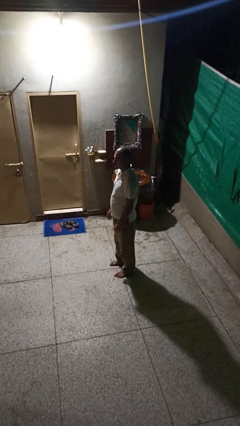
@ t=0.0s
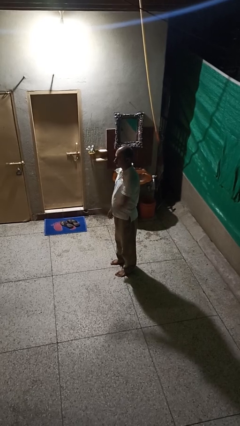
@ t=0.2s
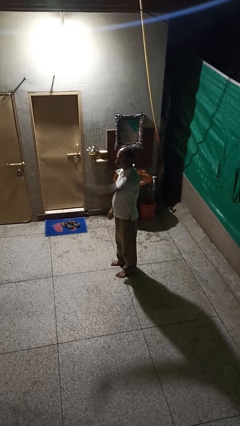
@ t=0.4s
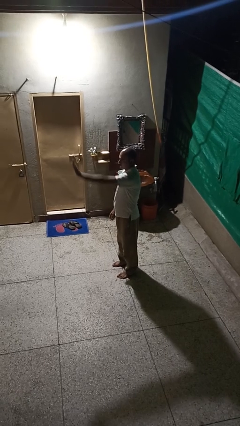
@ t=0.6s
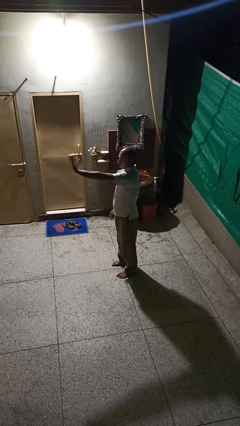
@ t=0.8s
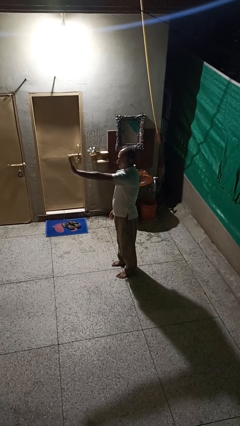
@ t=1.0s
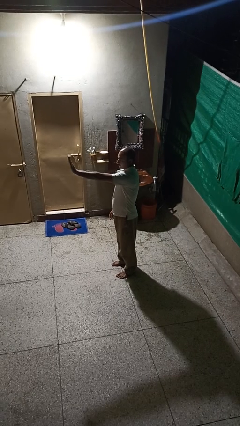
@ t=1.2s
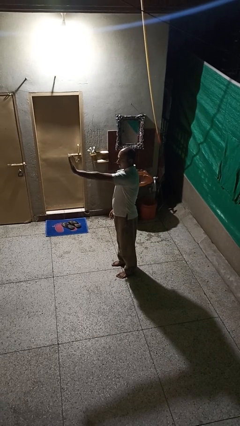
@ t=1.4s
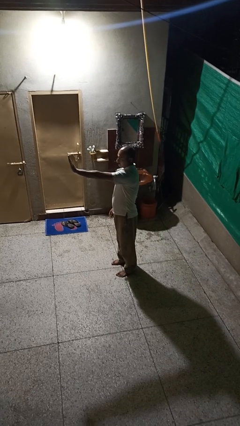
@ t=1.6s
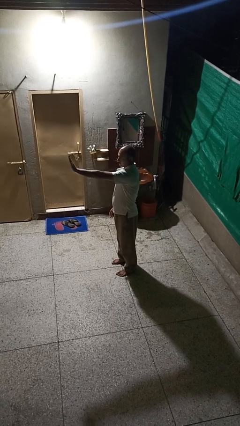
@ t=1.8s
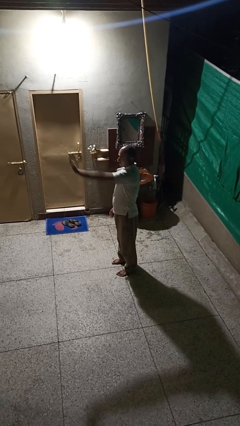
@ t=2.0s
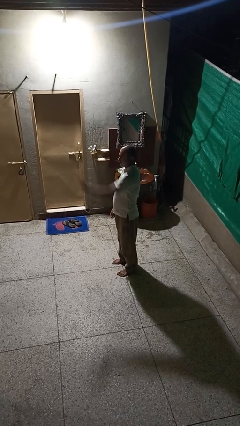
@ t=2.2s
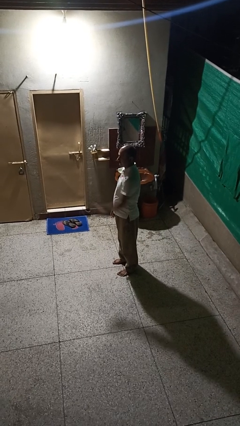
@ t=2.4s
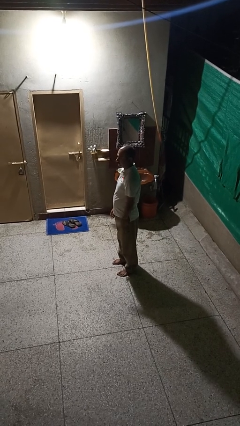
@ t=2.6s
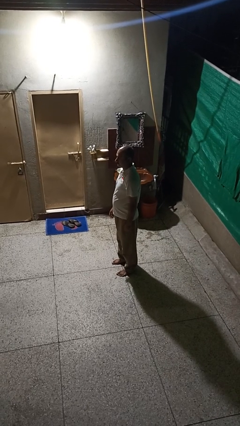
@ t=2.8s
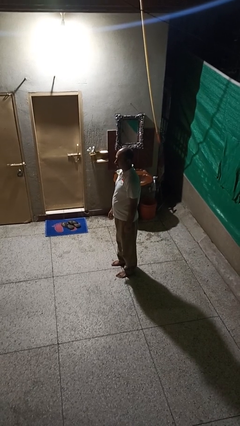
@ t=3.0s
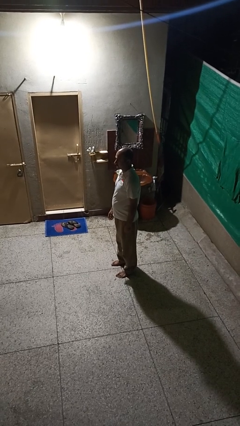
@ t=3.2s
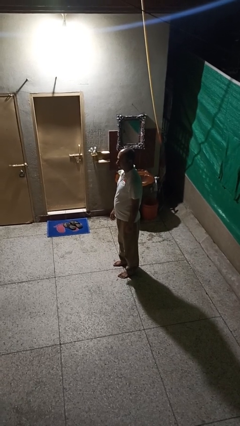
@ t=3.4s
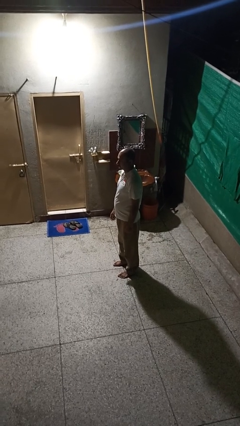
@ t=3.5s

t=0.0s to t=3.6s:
person gestures stop

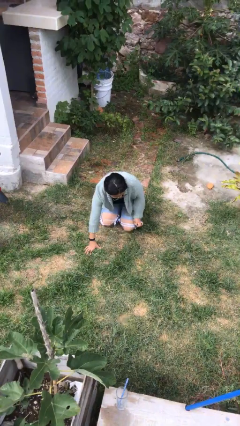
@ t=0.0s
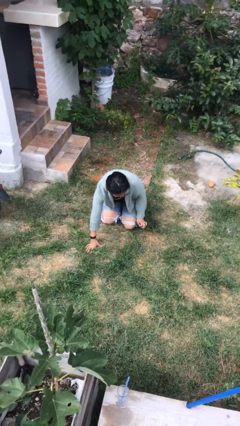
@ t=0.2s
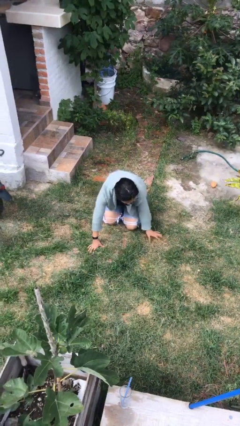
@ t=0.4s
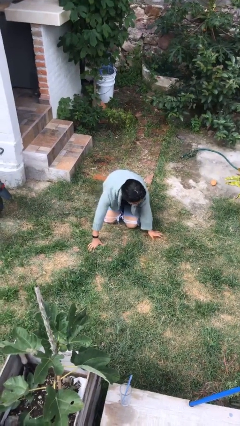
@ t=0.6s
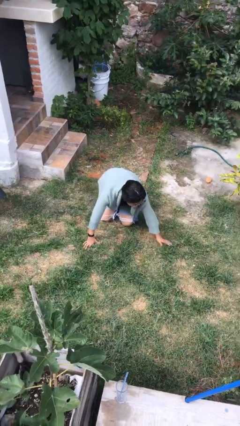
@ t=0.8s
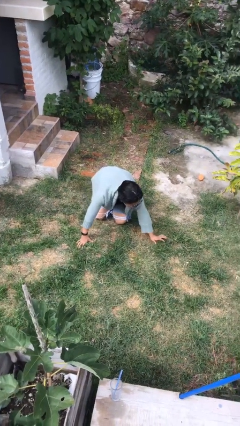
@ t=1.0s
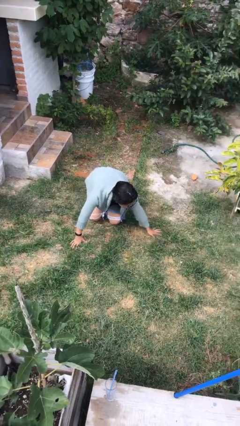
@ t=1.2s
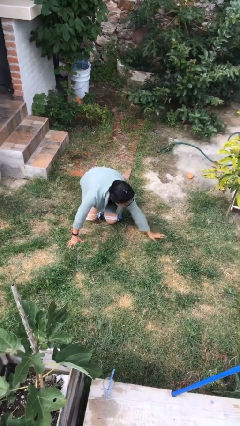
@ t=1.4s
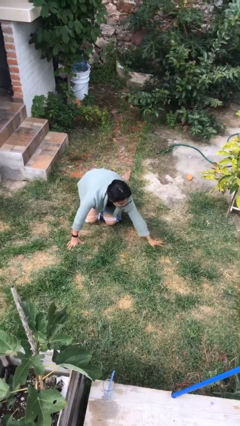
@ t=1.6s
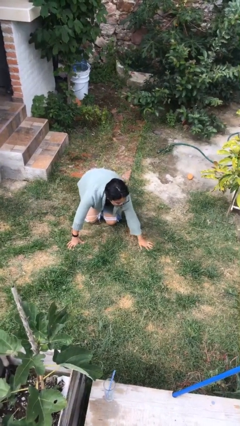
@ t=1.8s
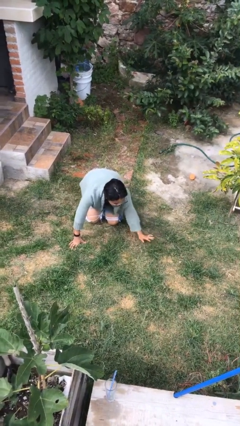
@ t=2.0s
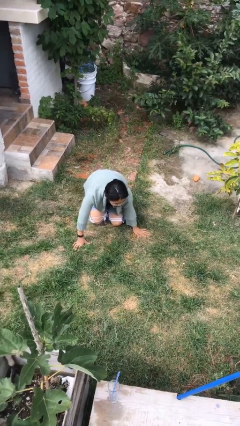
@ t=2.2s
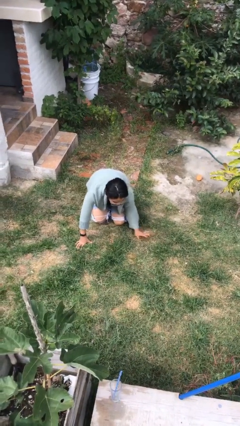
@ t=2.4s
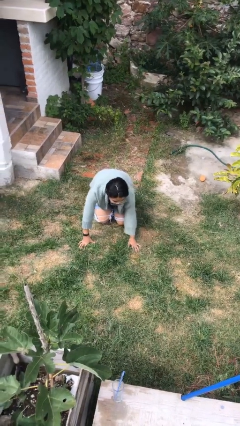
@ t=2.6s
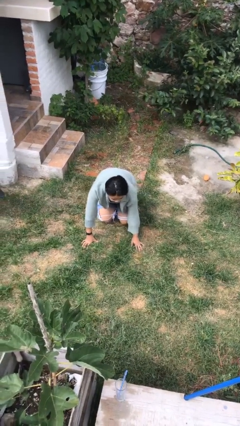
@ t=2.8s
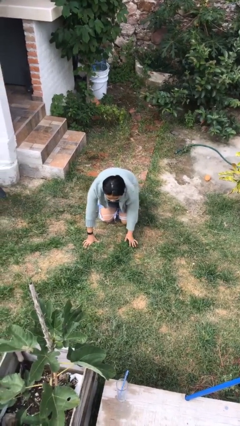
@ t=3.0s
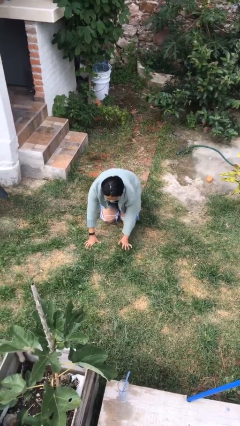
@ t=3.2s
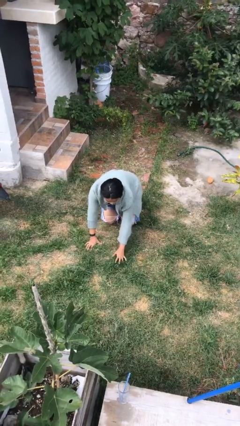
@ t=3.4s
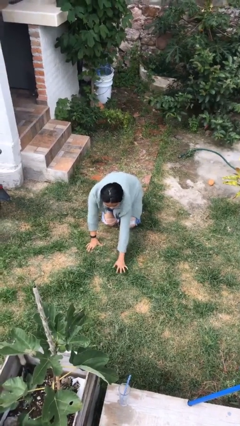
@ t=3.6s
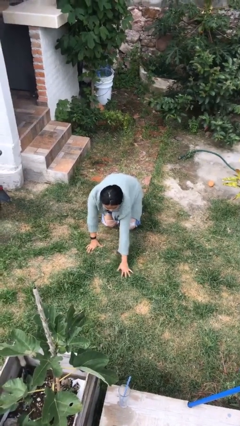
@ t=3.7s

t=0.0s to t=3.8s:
person crawls

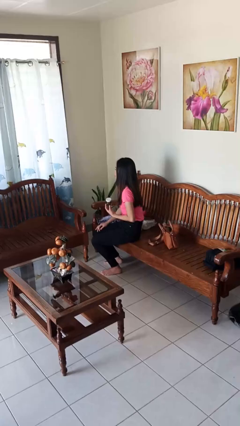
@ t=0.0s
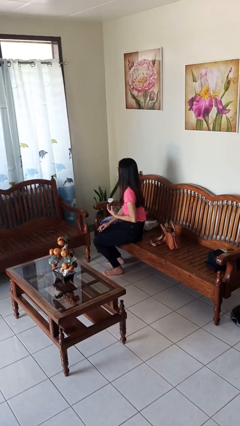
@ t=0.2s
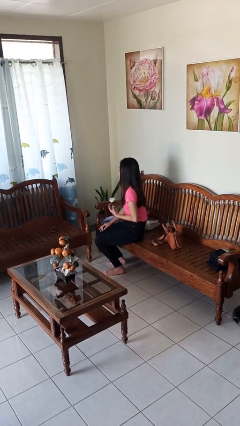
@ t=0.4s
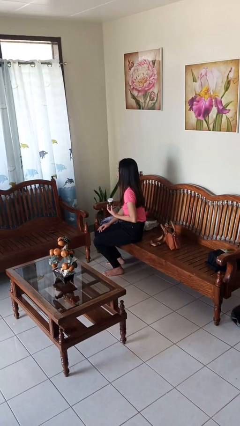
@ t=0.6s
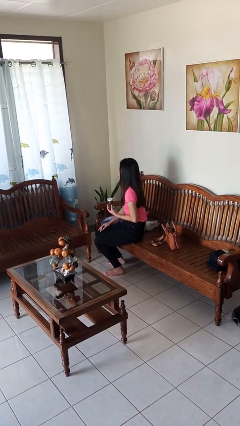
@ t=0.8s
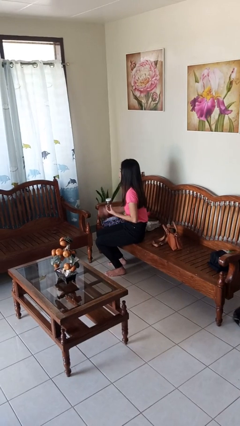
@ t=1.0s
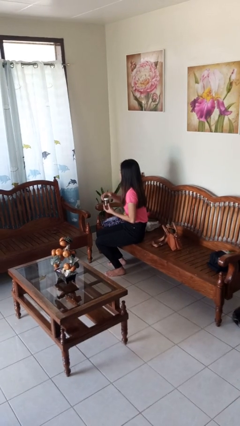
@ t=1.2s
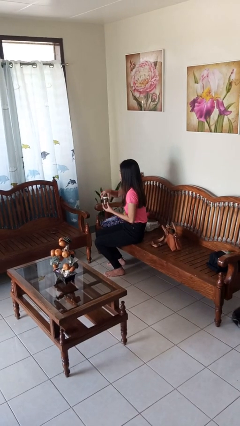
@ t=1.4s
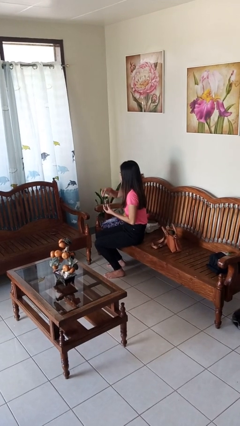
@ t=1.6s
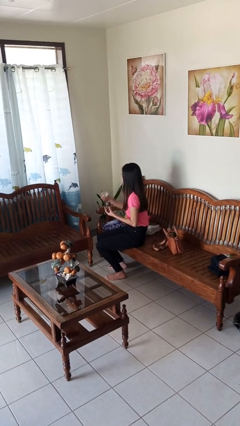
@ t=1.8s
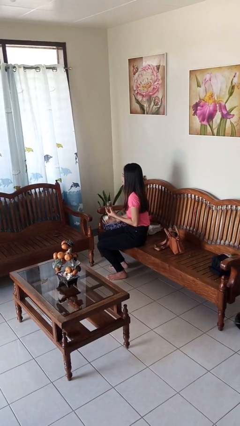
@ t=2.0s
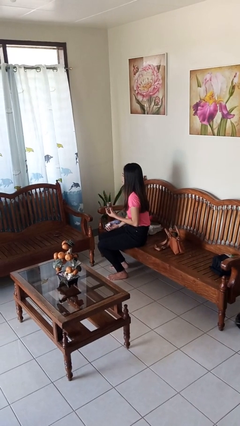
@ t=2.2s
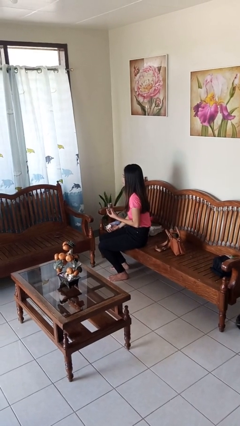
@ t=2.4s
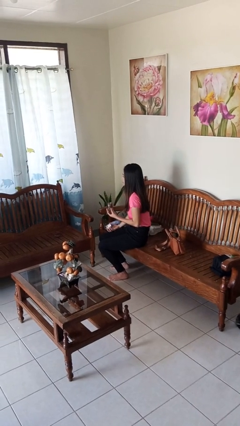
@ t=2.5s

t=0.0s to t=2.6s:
person opens jar

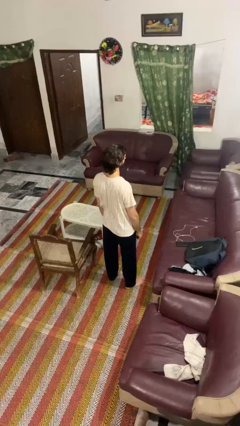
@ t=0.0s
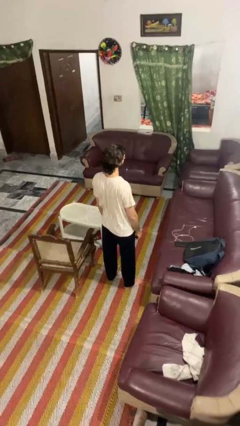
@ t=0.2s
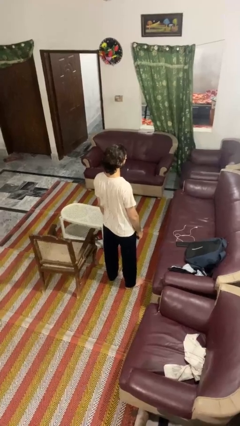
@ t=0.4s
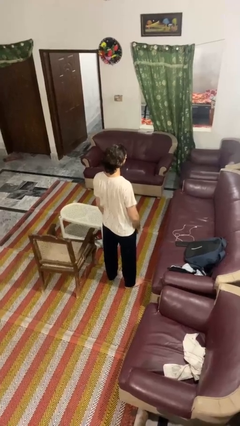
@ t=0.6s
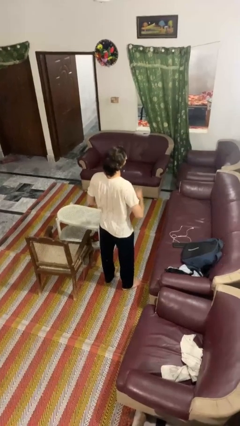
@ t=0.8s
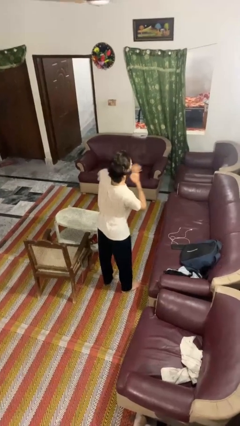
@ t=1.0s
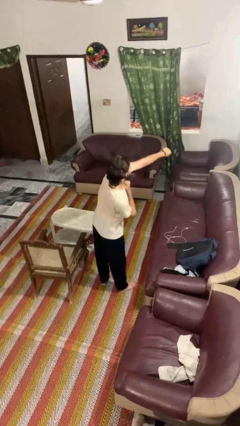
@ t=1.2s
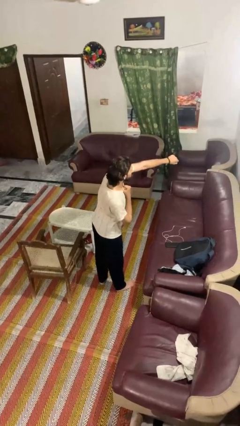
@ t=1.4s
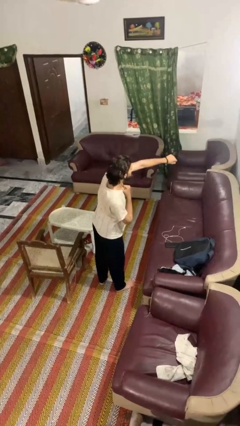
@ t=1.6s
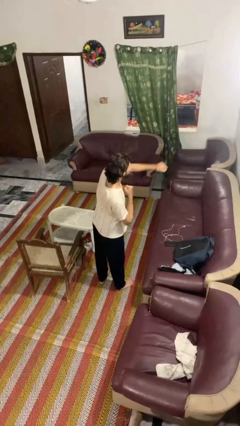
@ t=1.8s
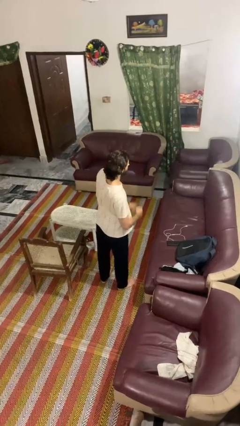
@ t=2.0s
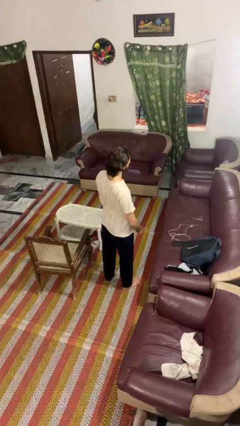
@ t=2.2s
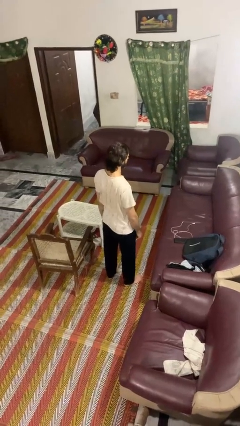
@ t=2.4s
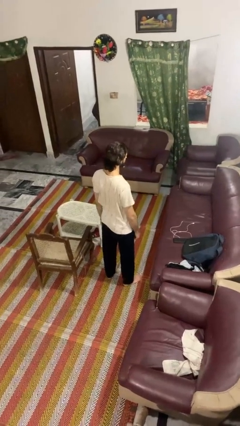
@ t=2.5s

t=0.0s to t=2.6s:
person punches

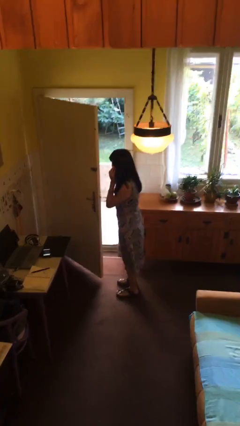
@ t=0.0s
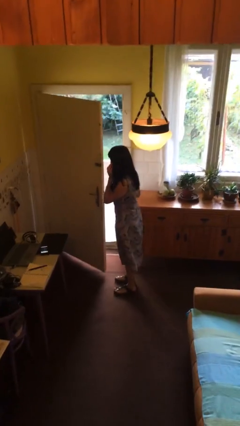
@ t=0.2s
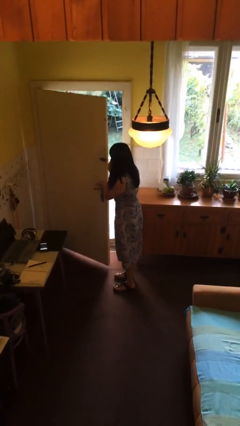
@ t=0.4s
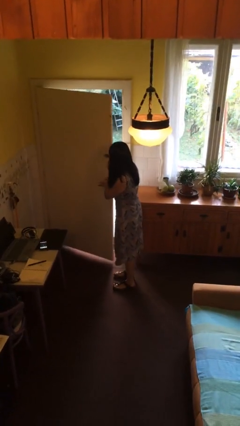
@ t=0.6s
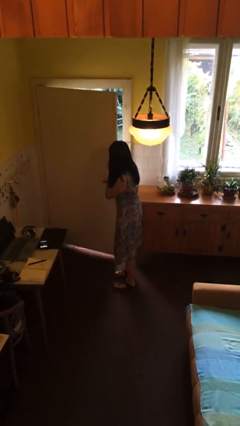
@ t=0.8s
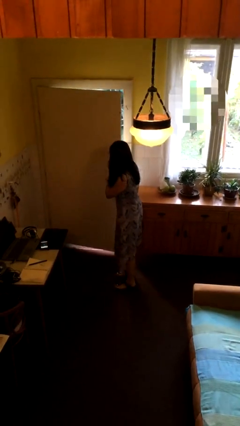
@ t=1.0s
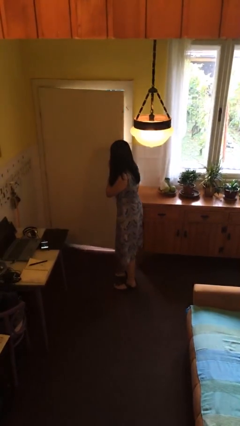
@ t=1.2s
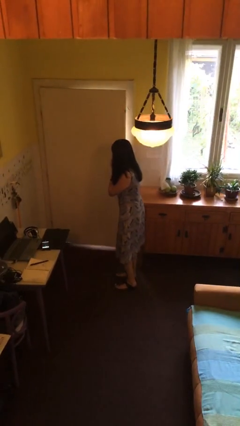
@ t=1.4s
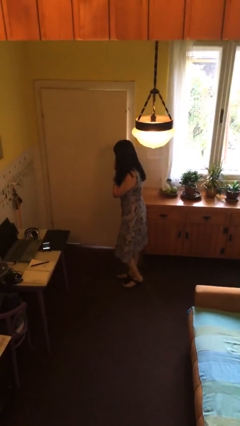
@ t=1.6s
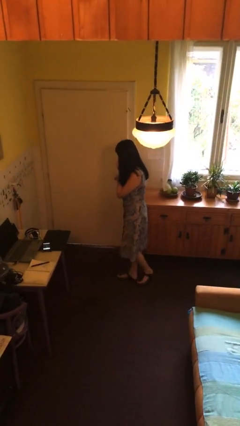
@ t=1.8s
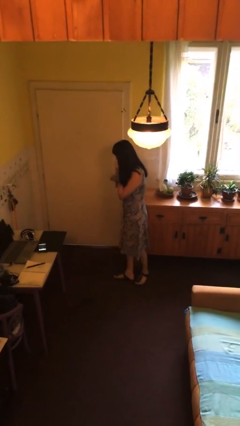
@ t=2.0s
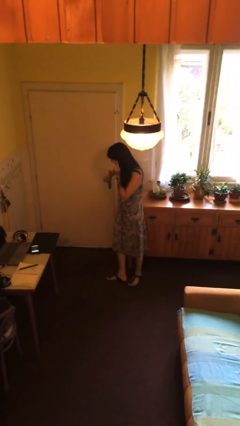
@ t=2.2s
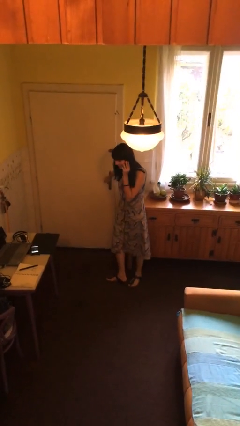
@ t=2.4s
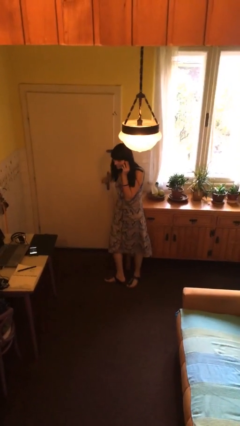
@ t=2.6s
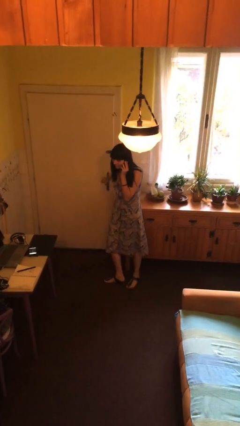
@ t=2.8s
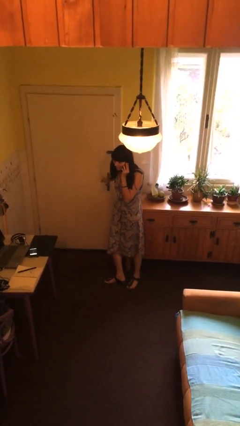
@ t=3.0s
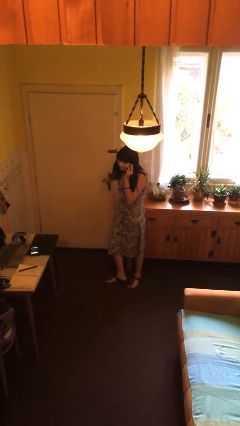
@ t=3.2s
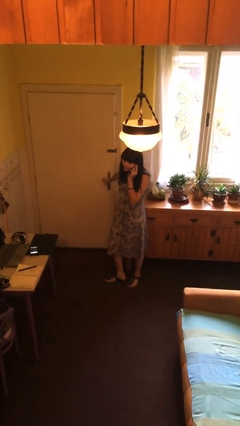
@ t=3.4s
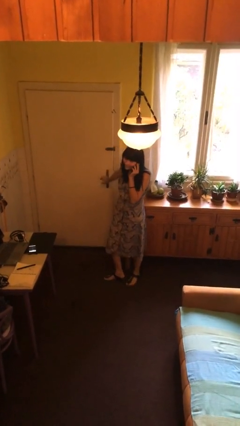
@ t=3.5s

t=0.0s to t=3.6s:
person closes facility door

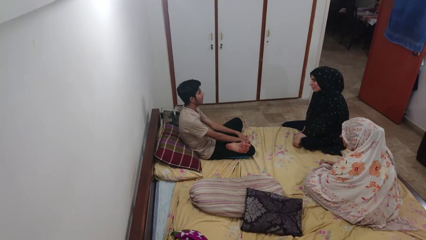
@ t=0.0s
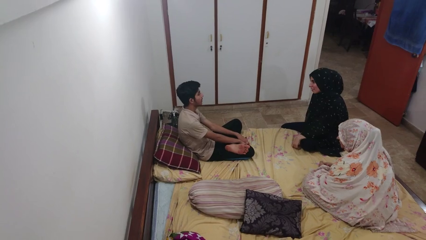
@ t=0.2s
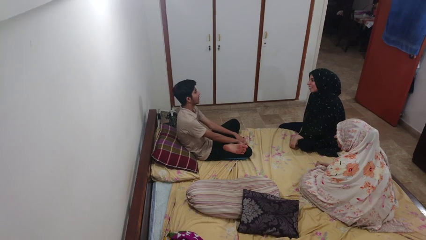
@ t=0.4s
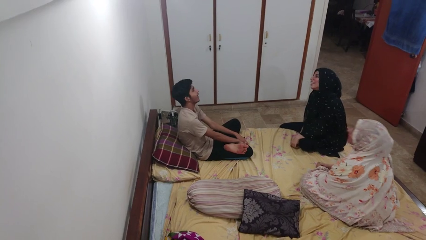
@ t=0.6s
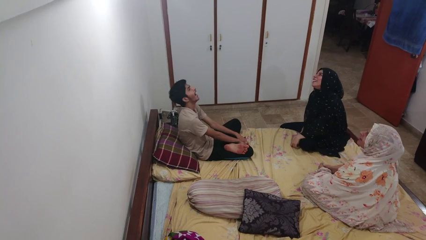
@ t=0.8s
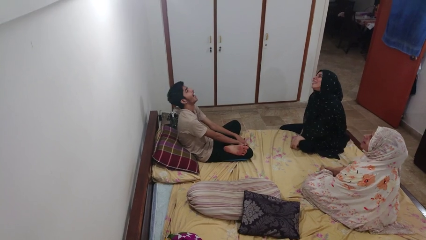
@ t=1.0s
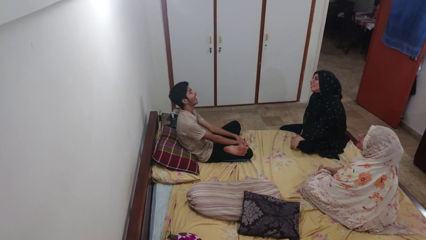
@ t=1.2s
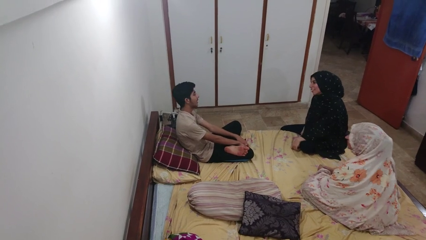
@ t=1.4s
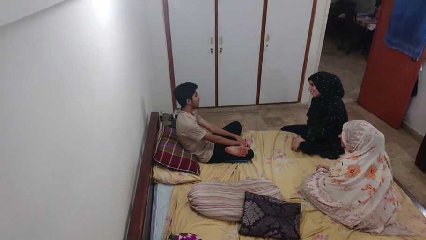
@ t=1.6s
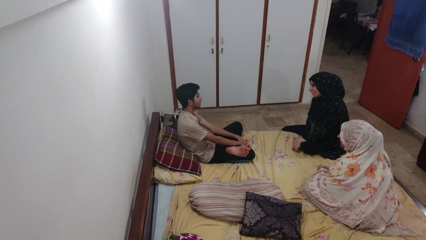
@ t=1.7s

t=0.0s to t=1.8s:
person laughs with person
